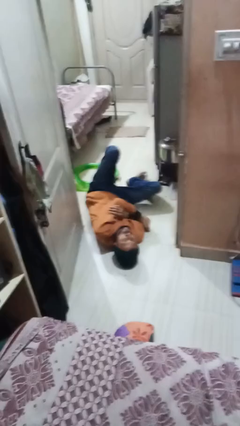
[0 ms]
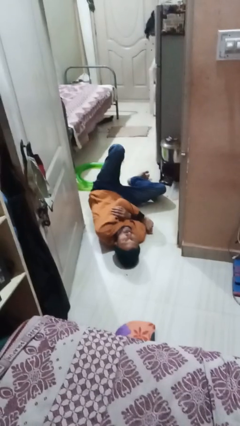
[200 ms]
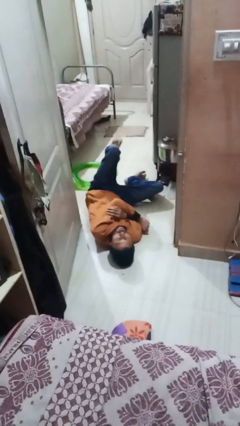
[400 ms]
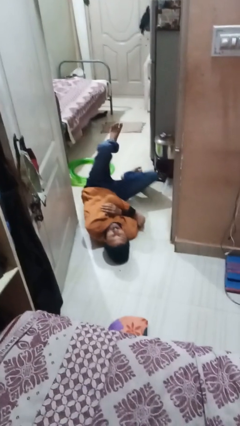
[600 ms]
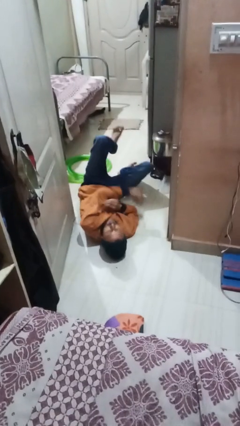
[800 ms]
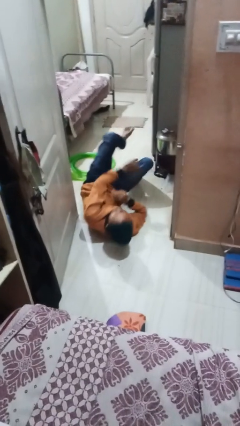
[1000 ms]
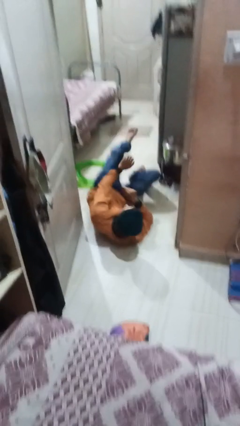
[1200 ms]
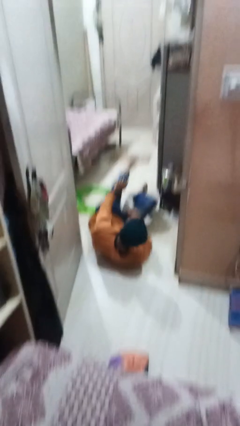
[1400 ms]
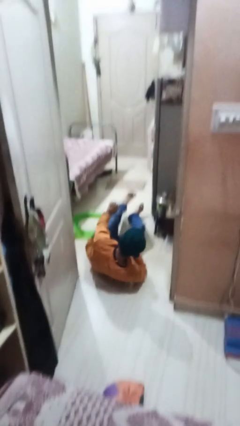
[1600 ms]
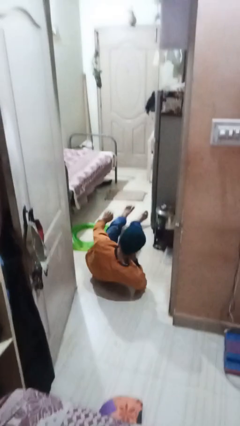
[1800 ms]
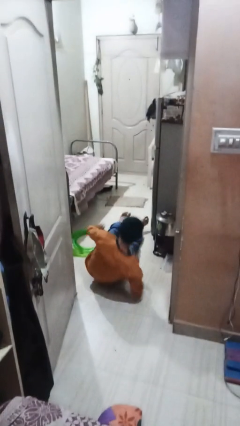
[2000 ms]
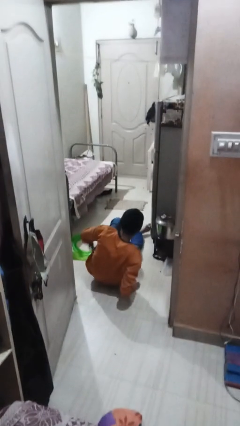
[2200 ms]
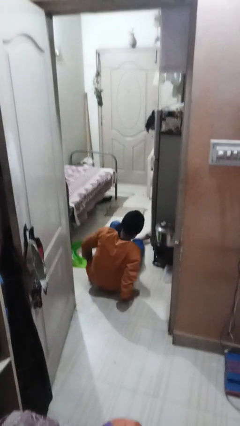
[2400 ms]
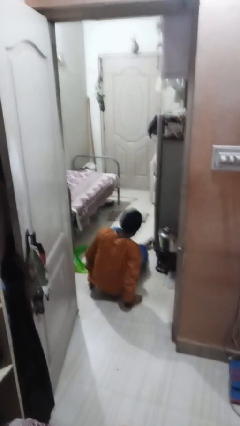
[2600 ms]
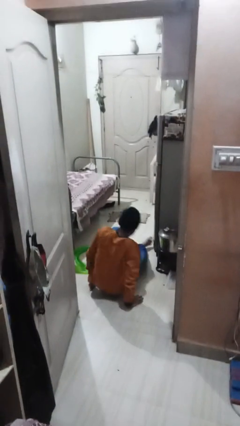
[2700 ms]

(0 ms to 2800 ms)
person lies down on floor

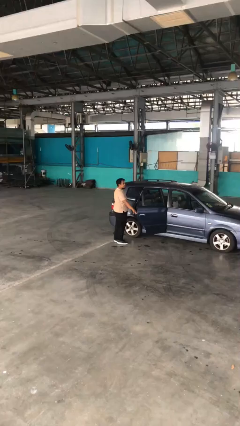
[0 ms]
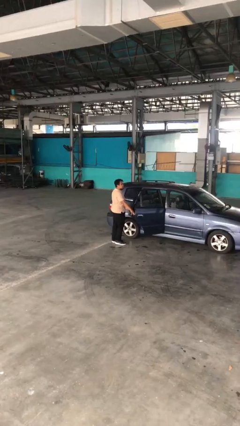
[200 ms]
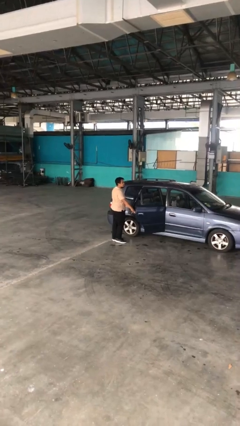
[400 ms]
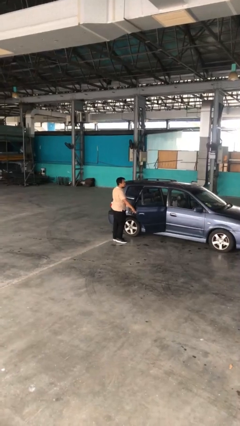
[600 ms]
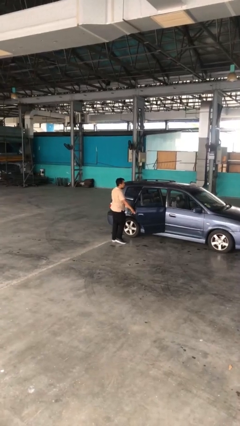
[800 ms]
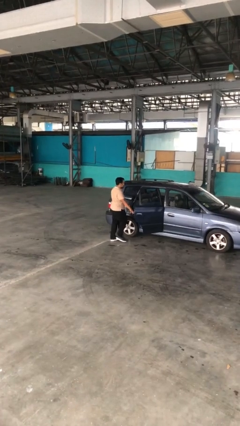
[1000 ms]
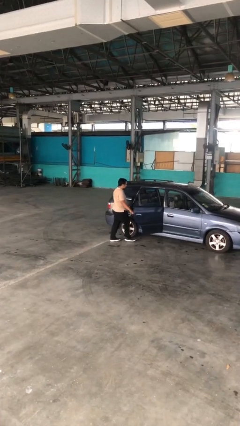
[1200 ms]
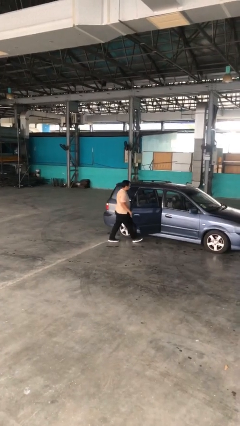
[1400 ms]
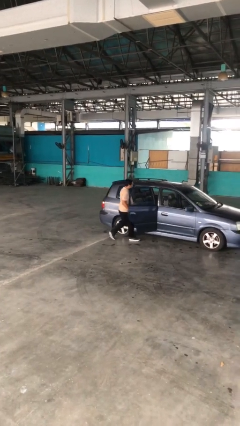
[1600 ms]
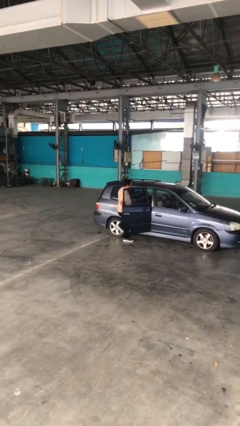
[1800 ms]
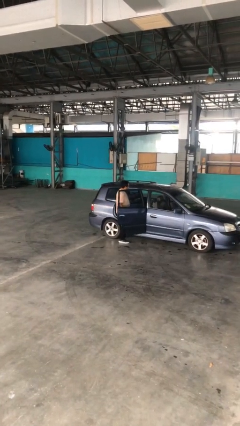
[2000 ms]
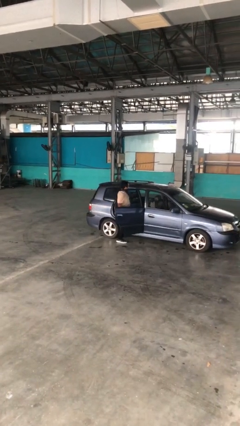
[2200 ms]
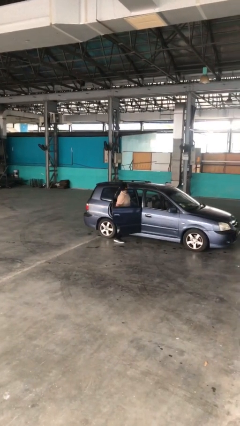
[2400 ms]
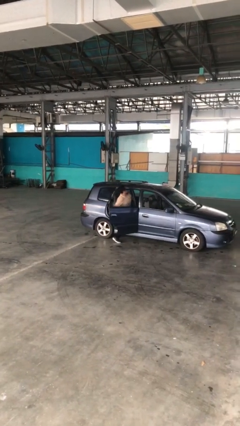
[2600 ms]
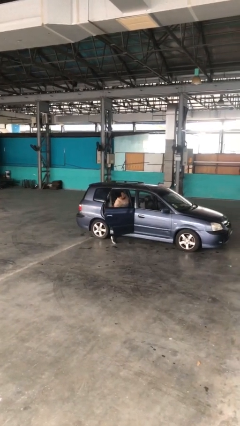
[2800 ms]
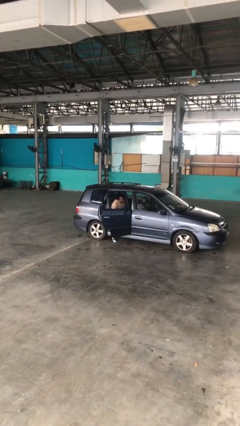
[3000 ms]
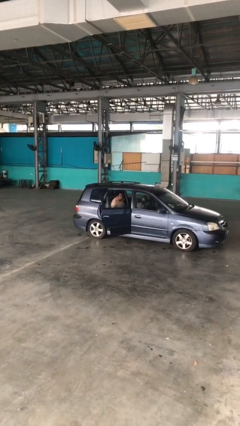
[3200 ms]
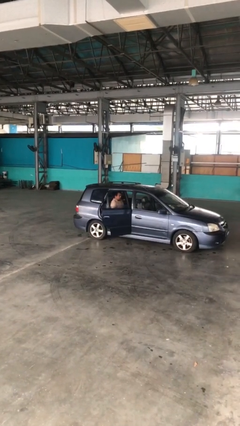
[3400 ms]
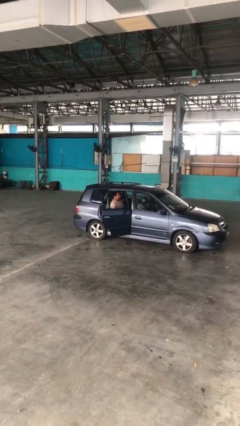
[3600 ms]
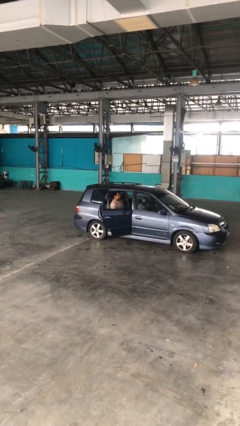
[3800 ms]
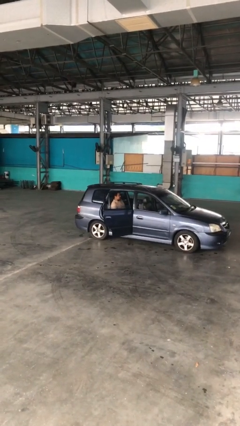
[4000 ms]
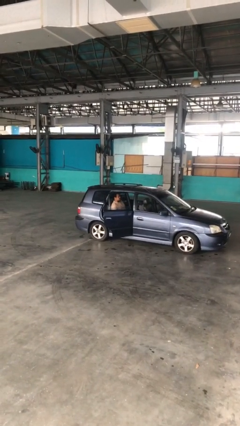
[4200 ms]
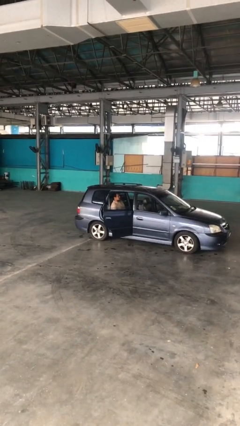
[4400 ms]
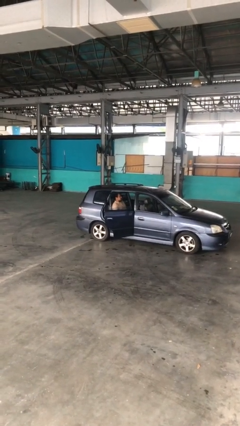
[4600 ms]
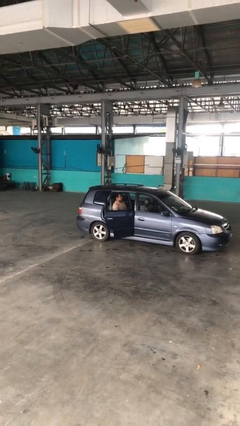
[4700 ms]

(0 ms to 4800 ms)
person enters car

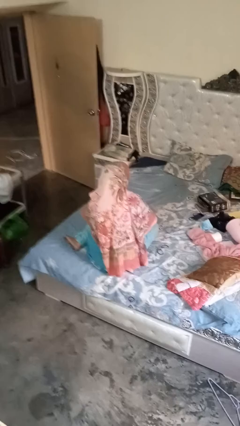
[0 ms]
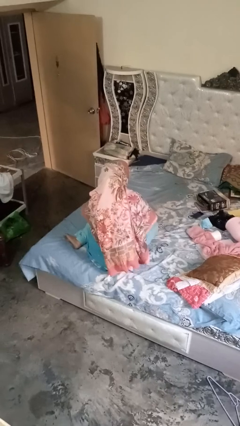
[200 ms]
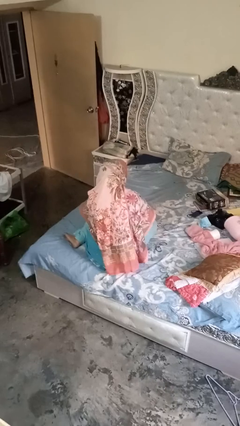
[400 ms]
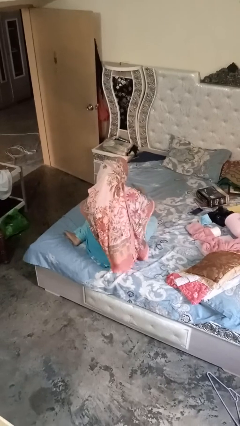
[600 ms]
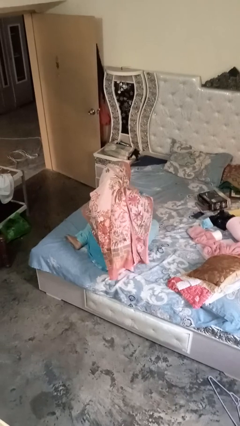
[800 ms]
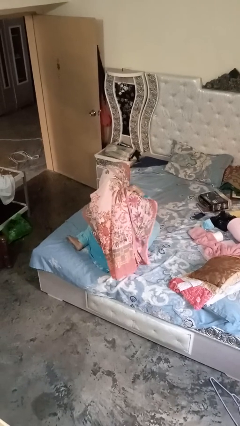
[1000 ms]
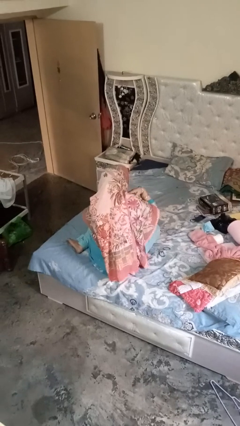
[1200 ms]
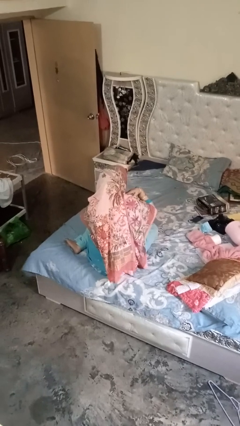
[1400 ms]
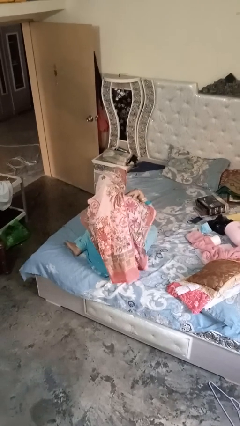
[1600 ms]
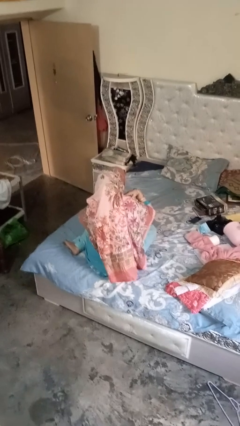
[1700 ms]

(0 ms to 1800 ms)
person gestures cut

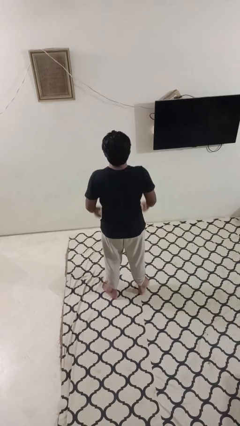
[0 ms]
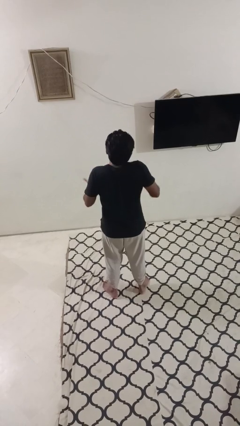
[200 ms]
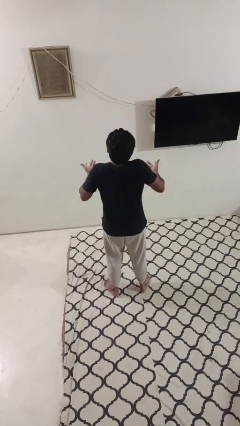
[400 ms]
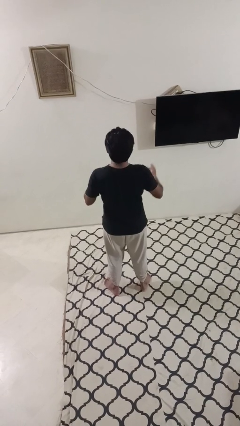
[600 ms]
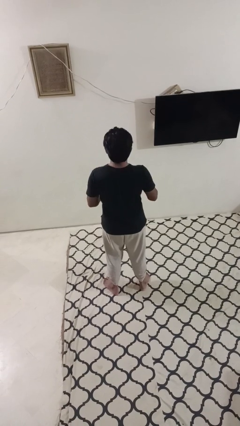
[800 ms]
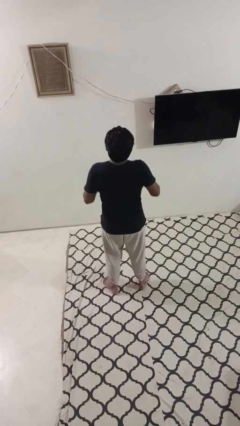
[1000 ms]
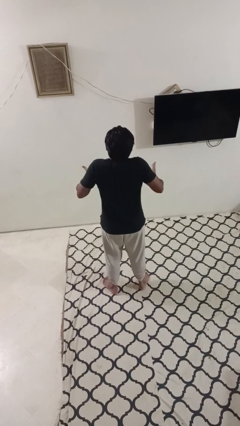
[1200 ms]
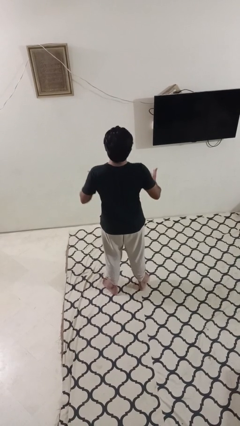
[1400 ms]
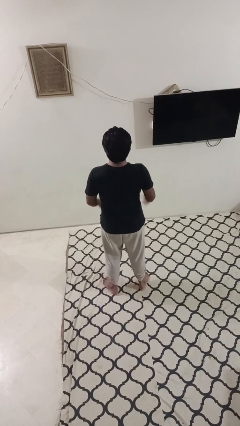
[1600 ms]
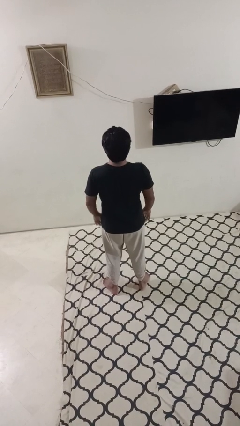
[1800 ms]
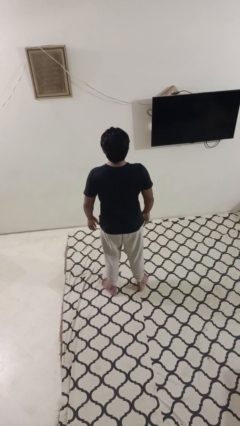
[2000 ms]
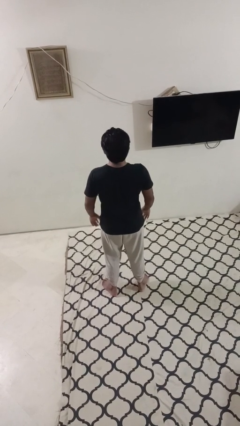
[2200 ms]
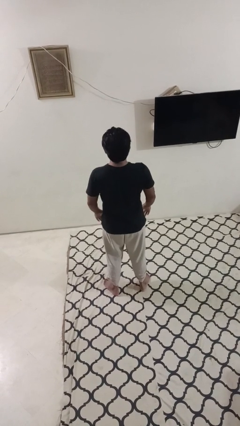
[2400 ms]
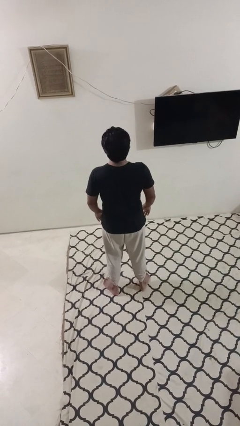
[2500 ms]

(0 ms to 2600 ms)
person shrugs

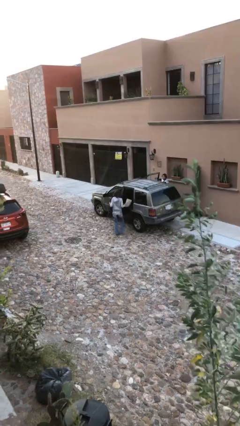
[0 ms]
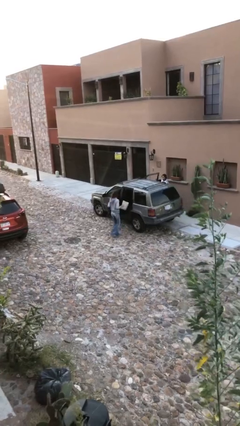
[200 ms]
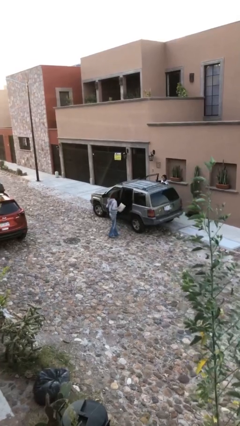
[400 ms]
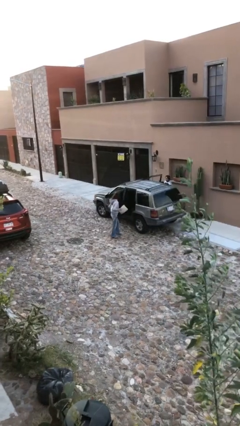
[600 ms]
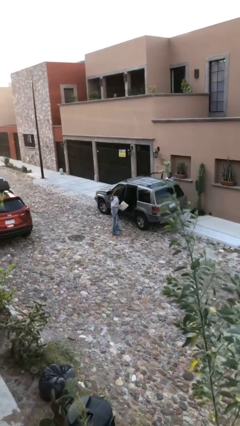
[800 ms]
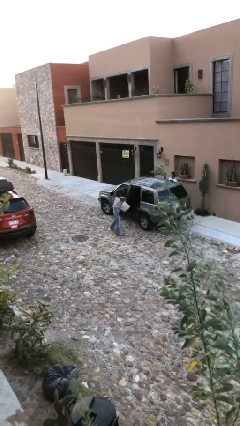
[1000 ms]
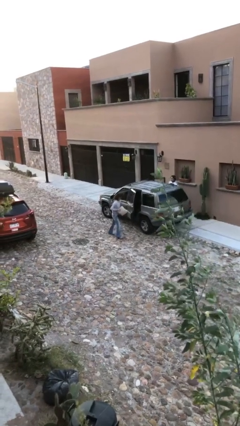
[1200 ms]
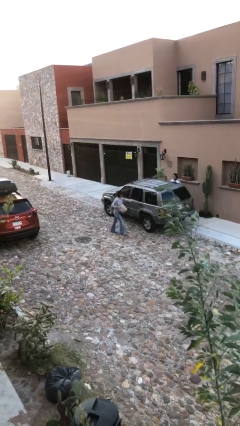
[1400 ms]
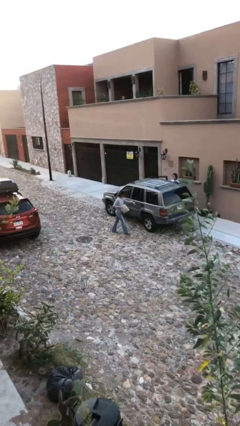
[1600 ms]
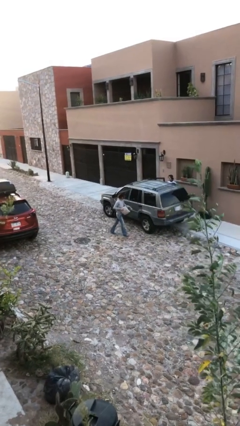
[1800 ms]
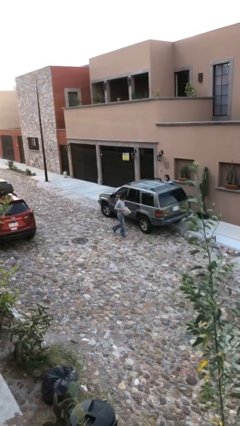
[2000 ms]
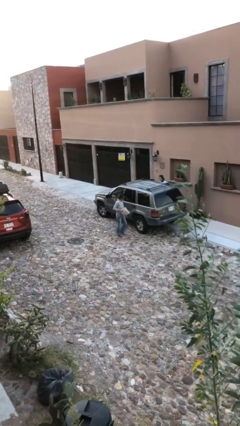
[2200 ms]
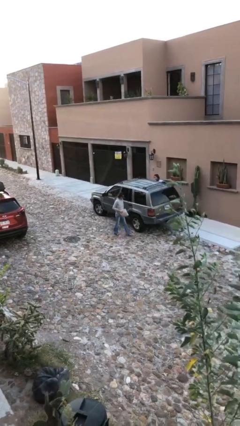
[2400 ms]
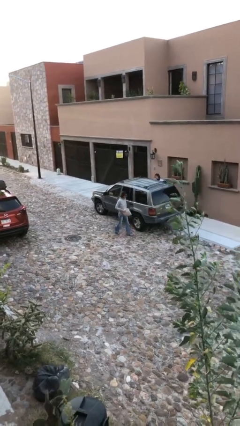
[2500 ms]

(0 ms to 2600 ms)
person closes car door

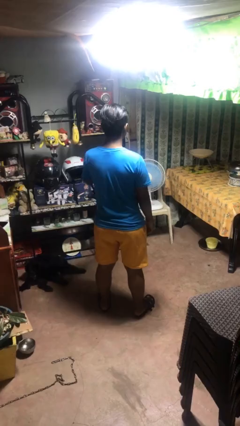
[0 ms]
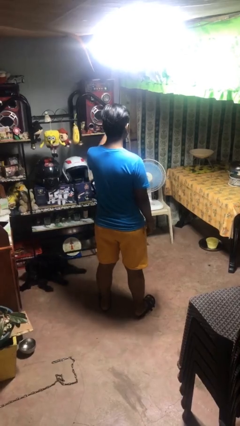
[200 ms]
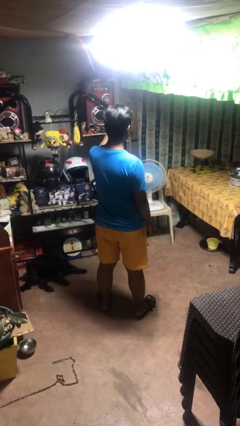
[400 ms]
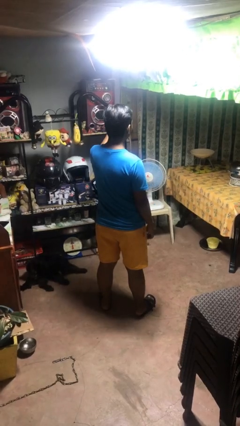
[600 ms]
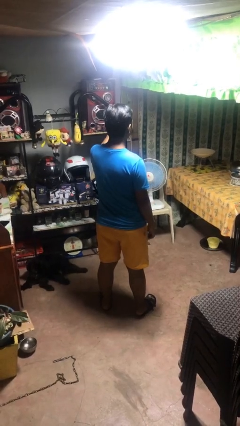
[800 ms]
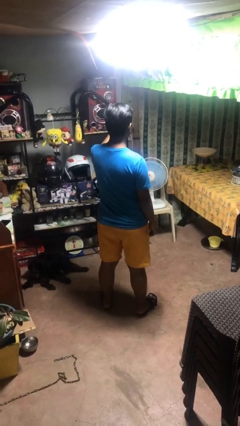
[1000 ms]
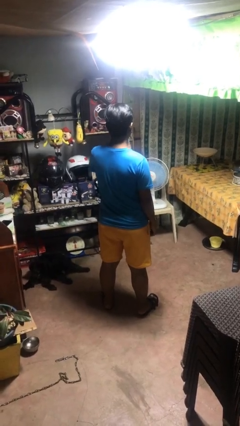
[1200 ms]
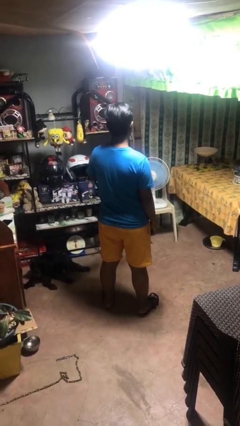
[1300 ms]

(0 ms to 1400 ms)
person gestures thumbs up

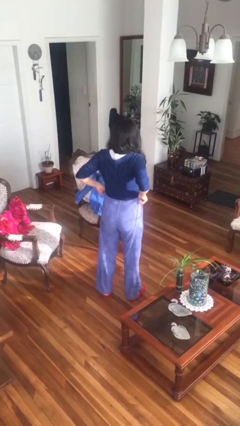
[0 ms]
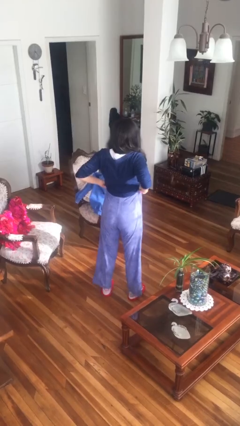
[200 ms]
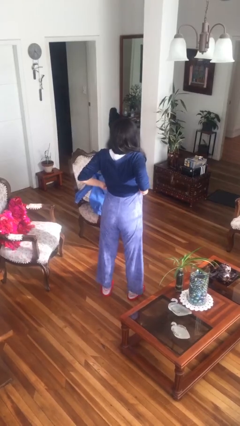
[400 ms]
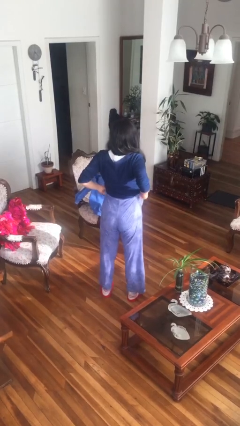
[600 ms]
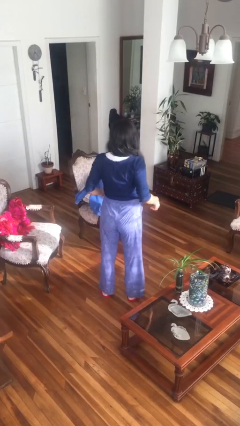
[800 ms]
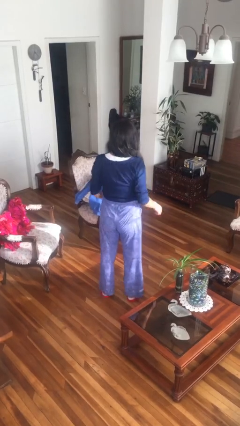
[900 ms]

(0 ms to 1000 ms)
person hikes up pants

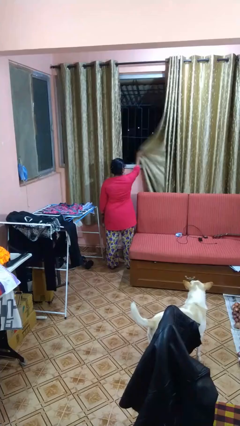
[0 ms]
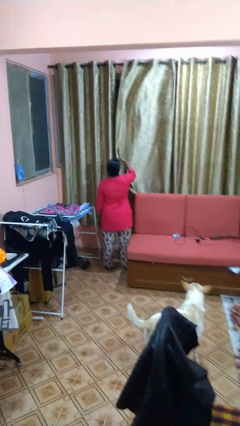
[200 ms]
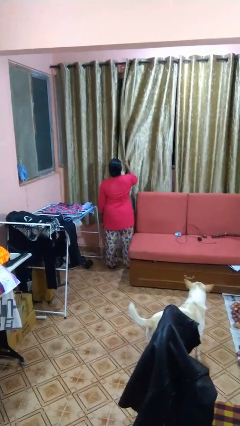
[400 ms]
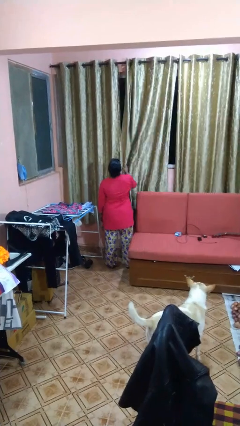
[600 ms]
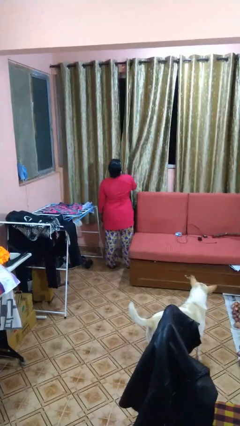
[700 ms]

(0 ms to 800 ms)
person closes curtains
